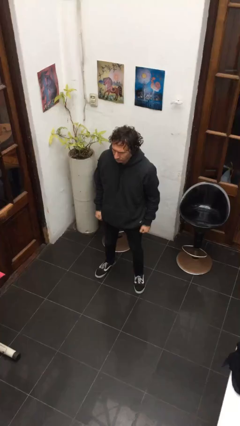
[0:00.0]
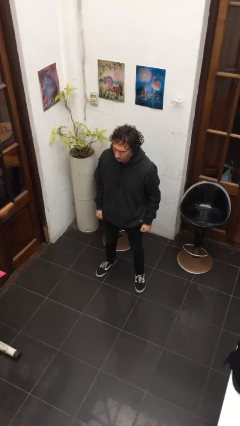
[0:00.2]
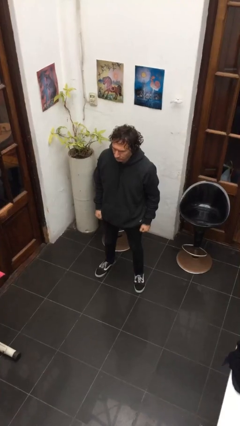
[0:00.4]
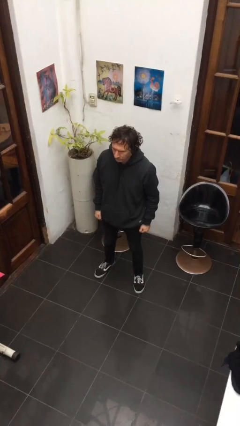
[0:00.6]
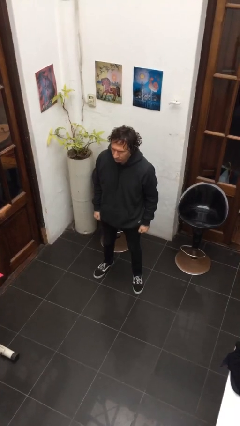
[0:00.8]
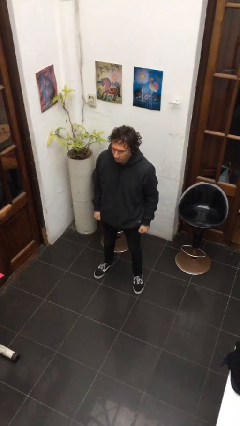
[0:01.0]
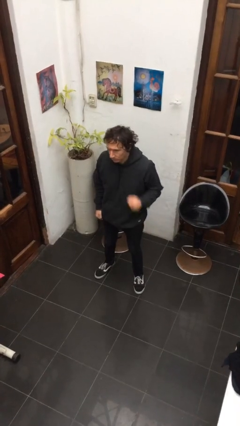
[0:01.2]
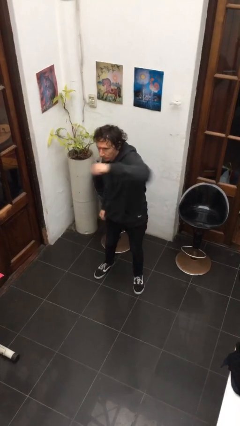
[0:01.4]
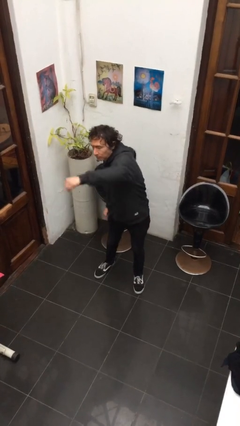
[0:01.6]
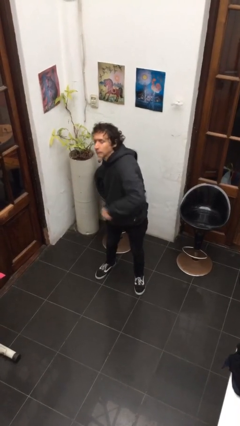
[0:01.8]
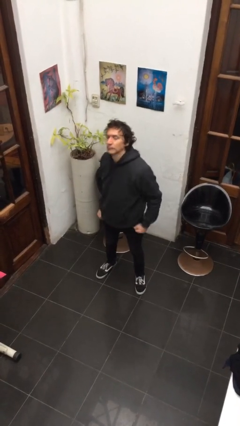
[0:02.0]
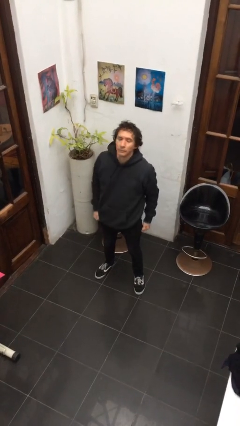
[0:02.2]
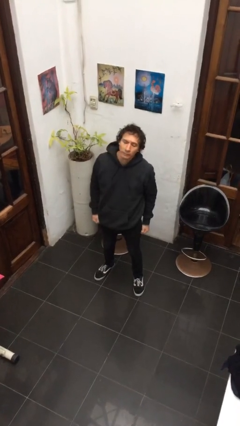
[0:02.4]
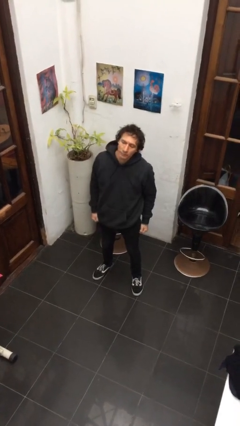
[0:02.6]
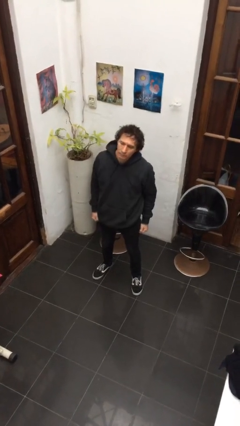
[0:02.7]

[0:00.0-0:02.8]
person punches

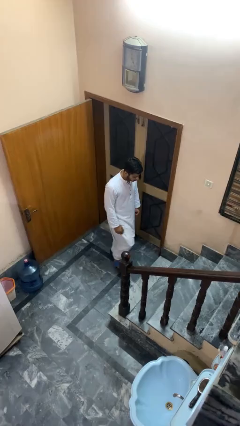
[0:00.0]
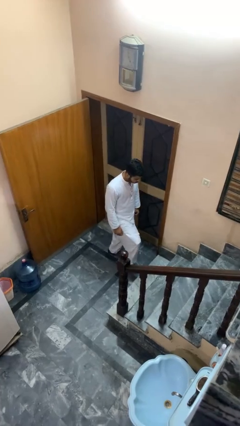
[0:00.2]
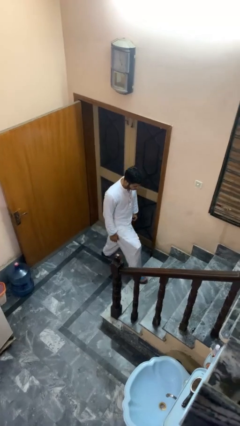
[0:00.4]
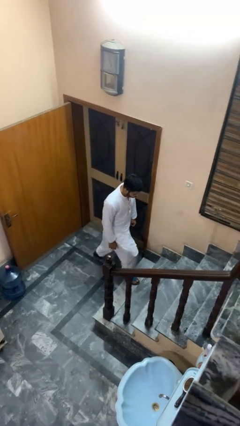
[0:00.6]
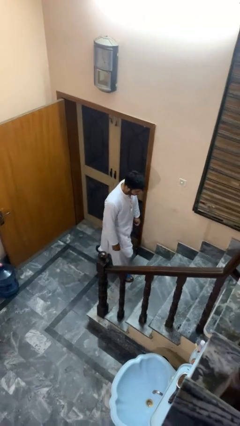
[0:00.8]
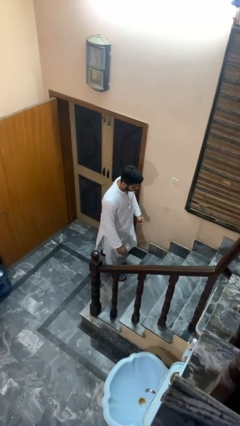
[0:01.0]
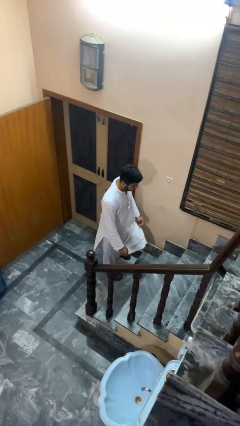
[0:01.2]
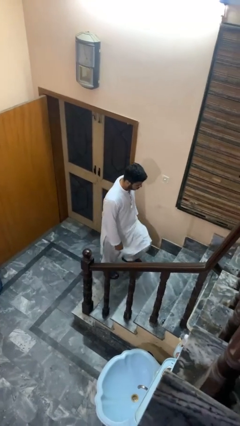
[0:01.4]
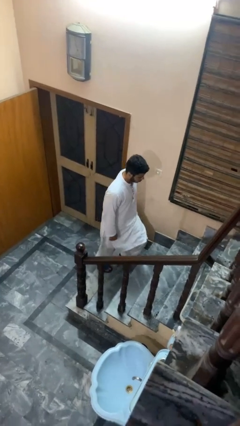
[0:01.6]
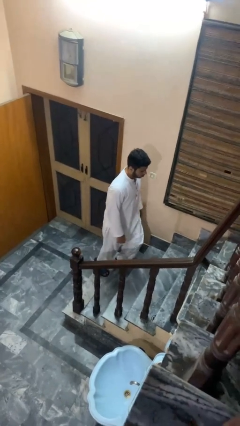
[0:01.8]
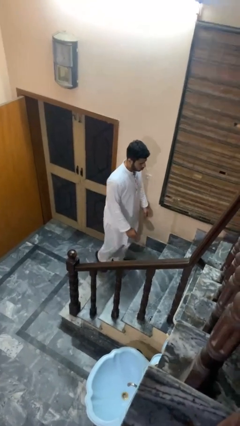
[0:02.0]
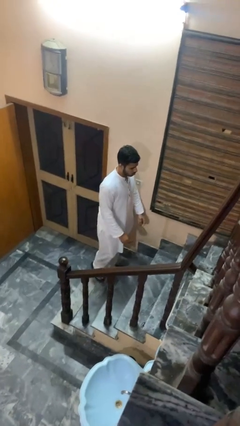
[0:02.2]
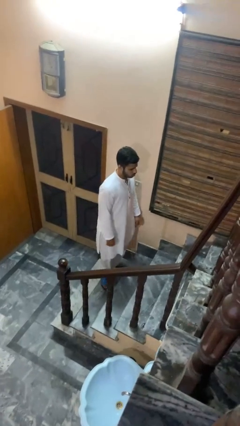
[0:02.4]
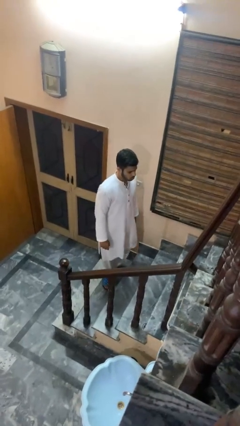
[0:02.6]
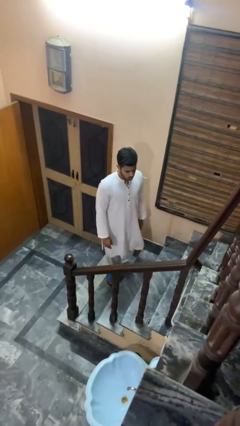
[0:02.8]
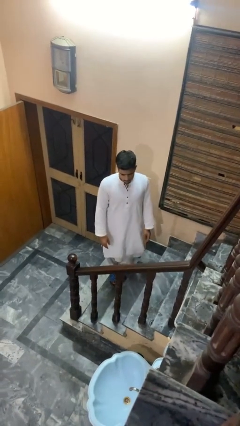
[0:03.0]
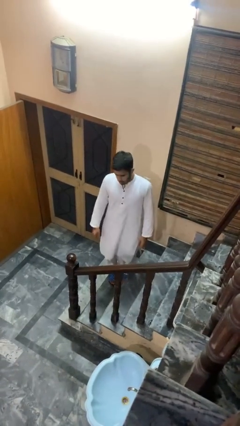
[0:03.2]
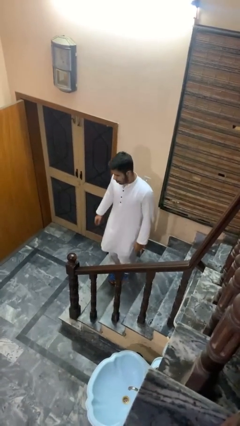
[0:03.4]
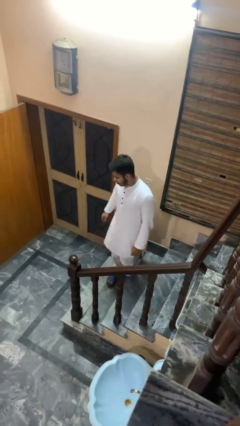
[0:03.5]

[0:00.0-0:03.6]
person climbs up stairs

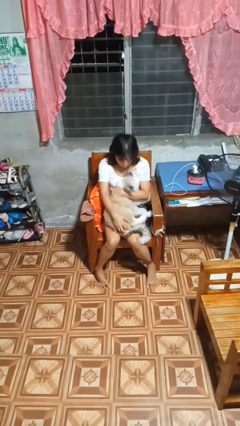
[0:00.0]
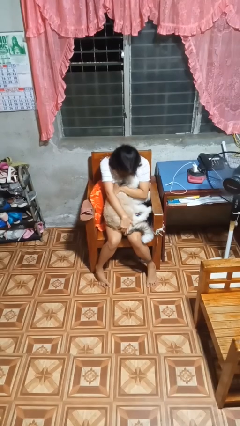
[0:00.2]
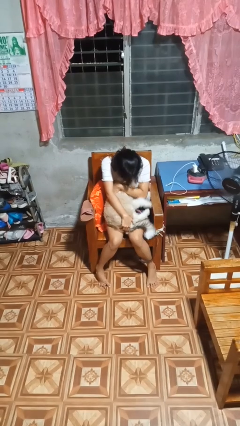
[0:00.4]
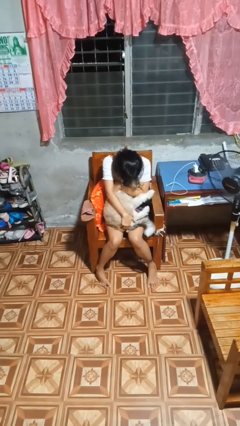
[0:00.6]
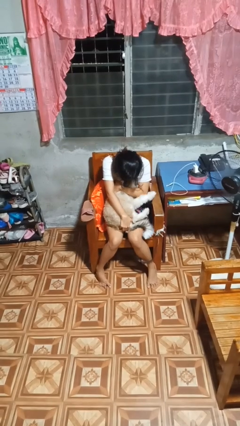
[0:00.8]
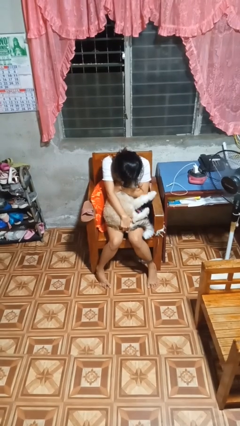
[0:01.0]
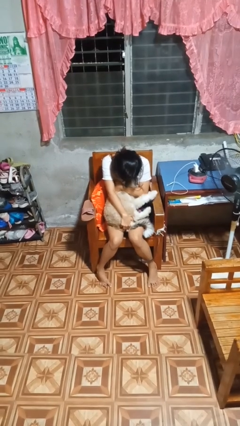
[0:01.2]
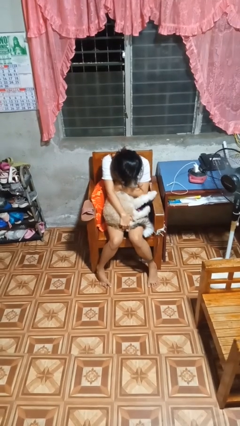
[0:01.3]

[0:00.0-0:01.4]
person hugs dog

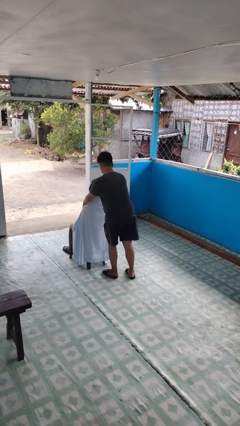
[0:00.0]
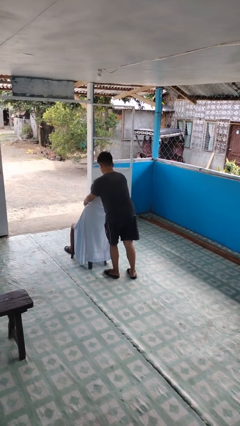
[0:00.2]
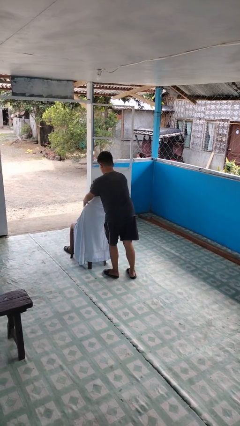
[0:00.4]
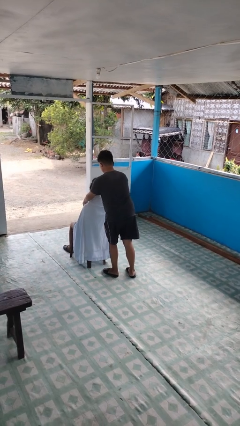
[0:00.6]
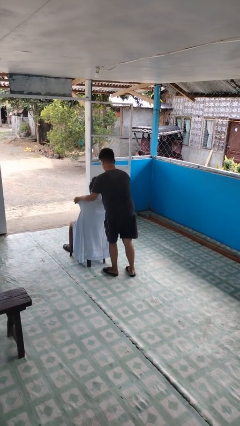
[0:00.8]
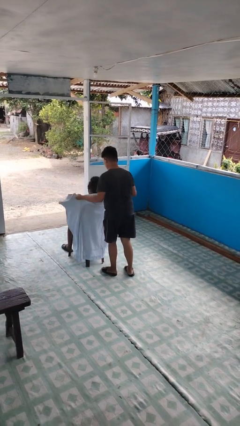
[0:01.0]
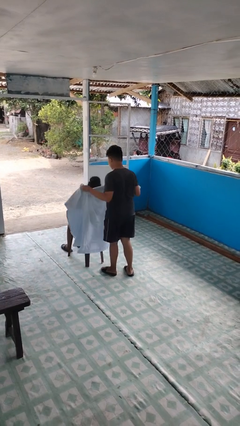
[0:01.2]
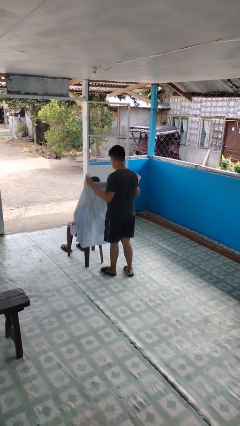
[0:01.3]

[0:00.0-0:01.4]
person uncovers friend with blanket

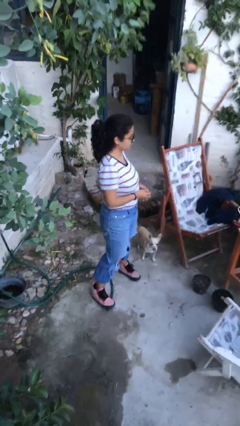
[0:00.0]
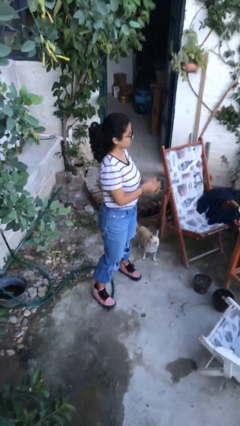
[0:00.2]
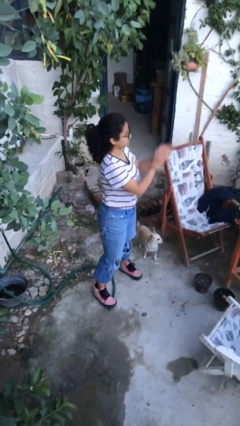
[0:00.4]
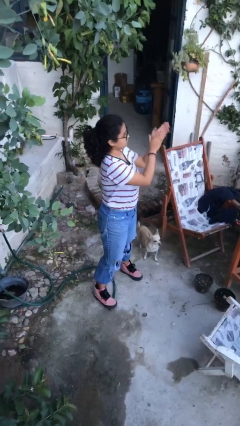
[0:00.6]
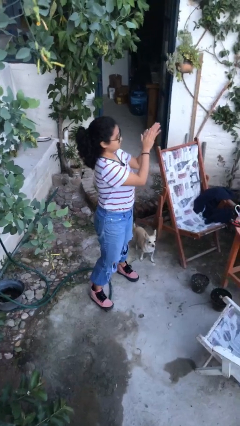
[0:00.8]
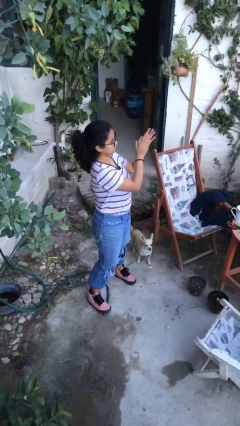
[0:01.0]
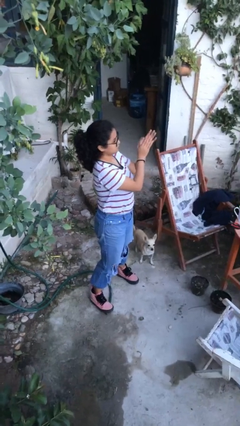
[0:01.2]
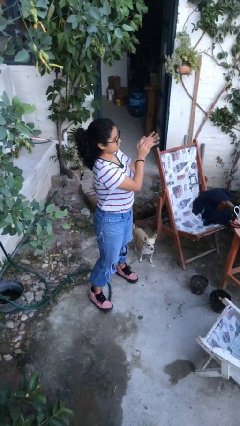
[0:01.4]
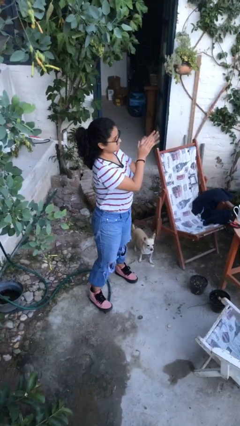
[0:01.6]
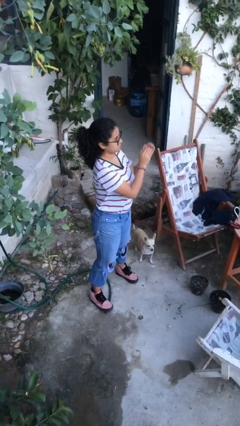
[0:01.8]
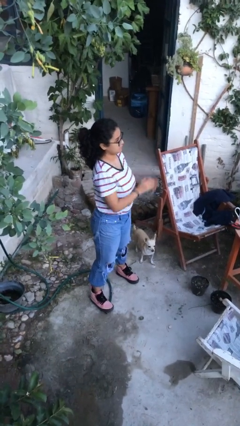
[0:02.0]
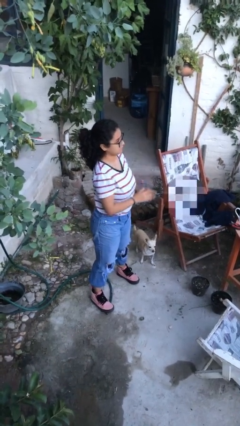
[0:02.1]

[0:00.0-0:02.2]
person claps hands

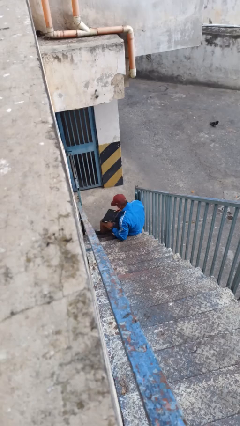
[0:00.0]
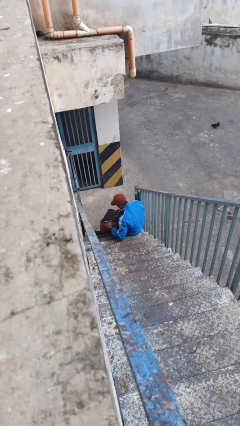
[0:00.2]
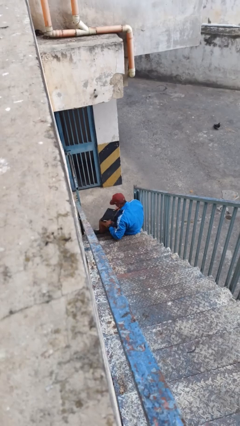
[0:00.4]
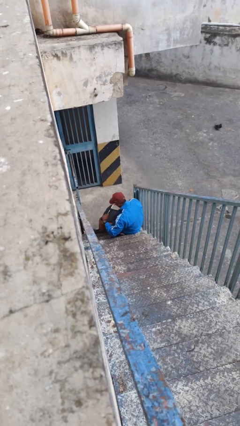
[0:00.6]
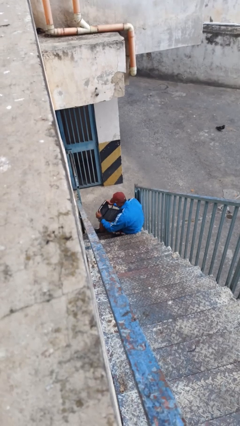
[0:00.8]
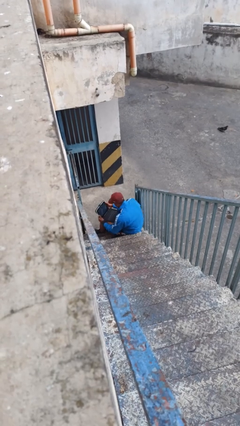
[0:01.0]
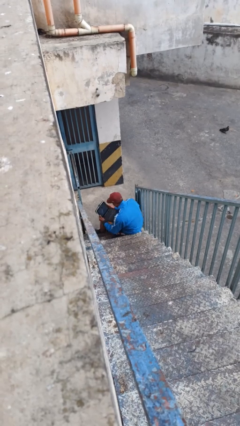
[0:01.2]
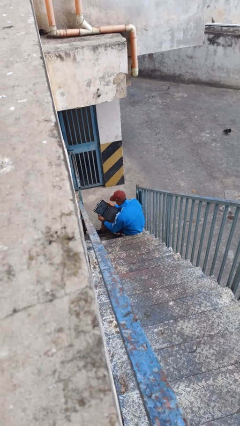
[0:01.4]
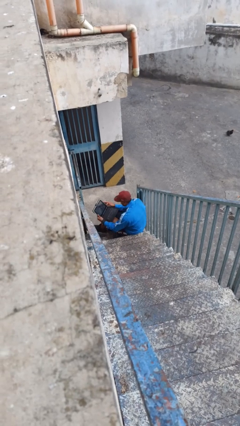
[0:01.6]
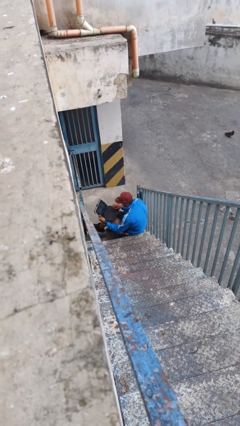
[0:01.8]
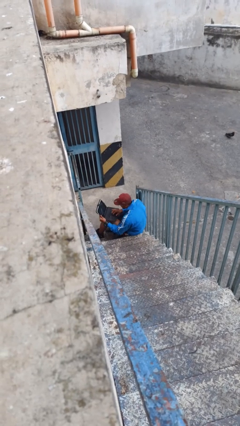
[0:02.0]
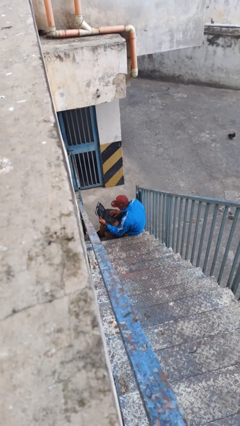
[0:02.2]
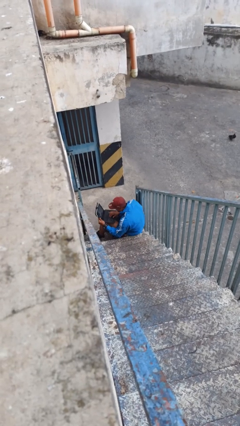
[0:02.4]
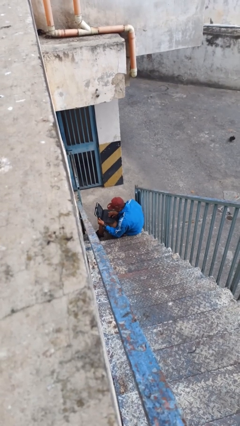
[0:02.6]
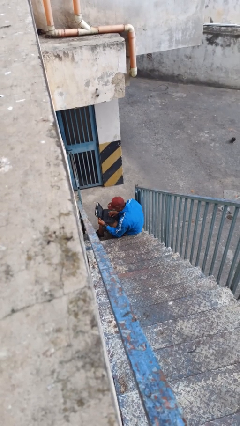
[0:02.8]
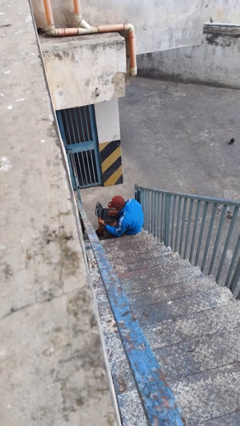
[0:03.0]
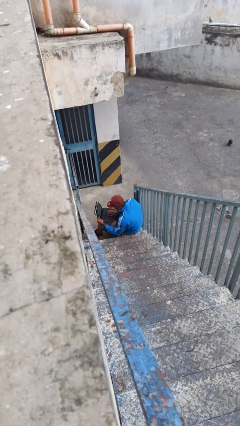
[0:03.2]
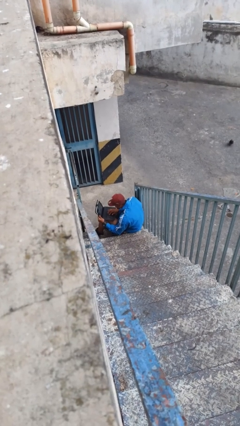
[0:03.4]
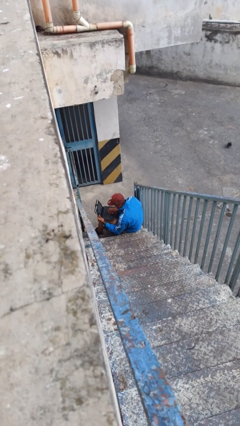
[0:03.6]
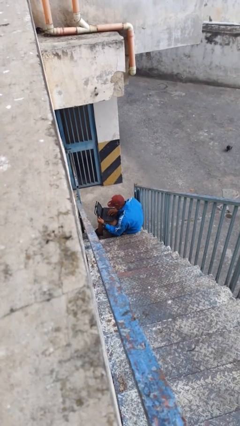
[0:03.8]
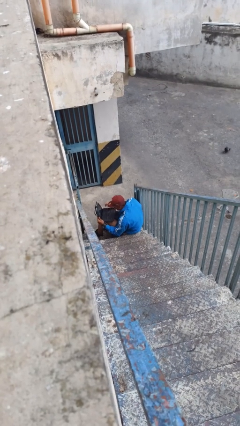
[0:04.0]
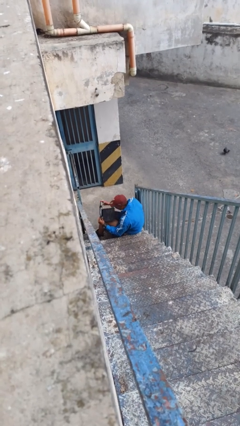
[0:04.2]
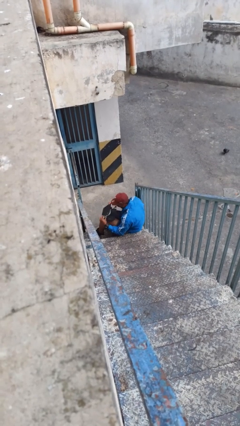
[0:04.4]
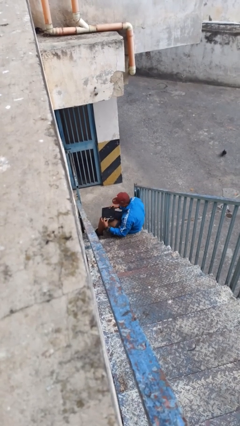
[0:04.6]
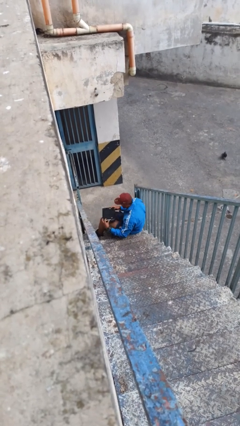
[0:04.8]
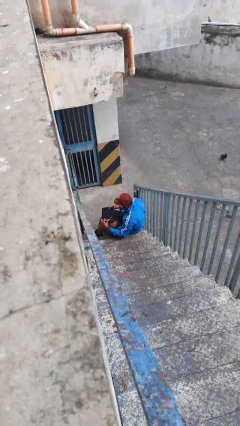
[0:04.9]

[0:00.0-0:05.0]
person interacts with laptop

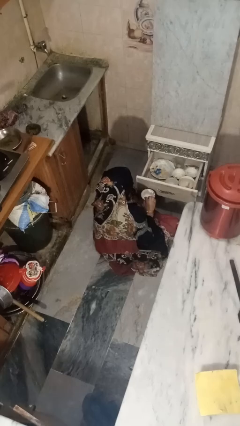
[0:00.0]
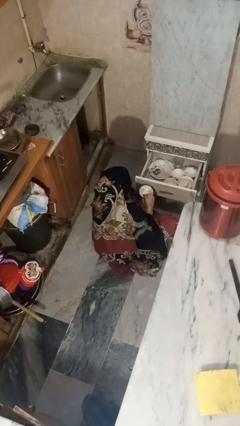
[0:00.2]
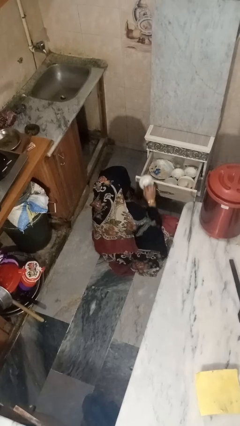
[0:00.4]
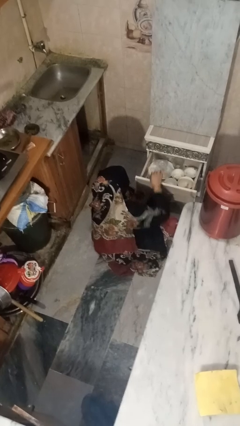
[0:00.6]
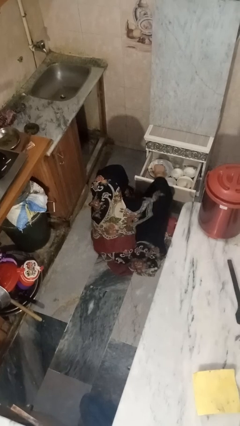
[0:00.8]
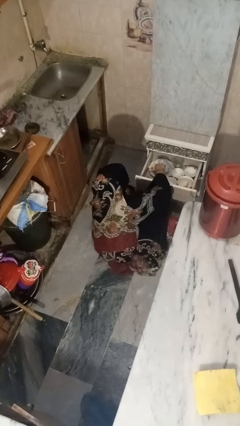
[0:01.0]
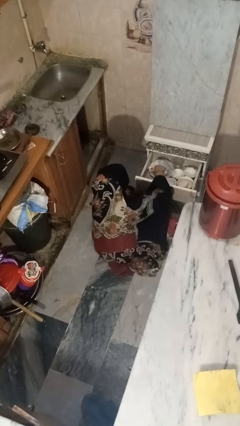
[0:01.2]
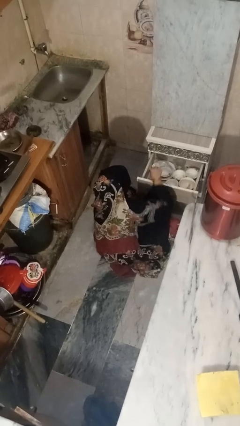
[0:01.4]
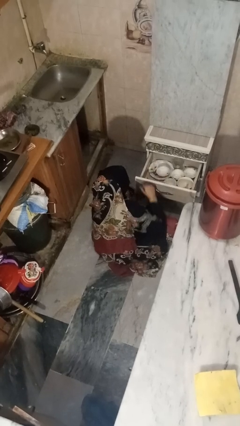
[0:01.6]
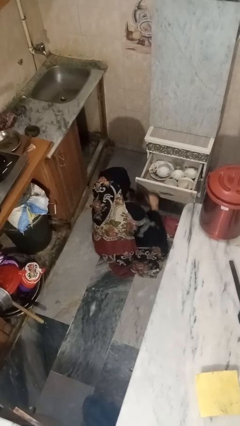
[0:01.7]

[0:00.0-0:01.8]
person puts object into kitchen drawer
